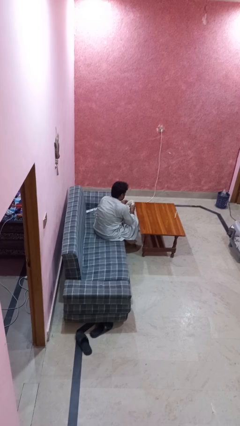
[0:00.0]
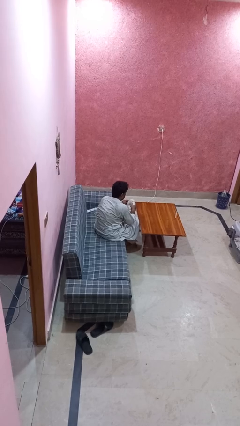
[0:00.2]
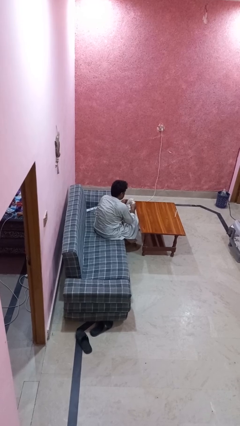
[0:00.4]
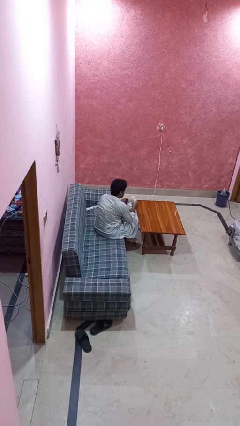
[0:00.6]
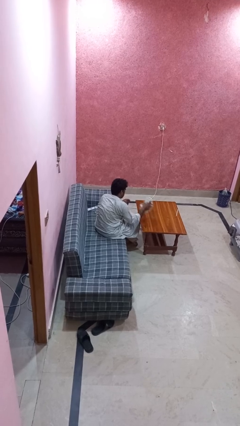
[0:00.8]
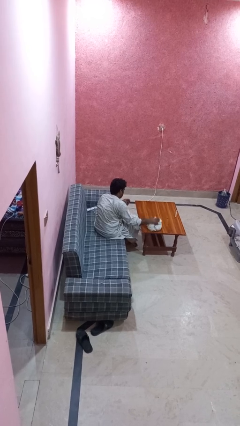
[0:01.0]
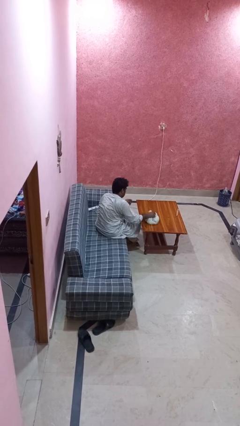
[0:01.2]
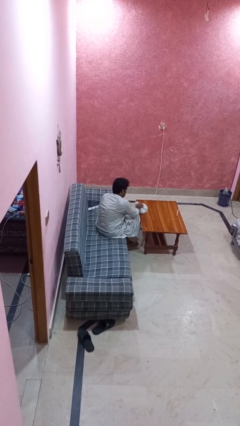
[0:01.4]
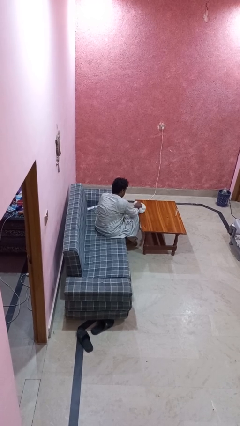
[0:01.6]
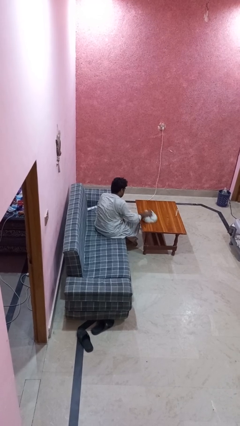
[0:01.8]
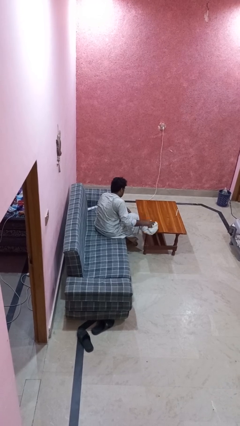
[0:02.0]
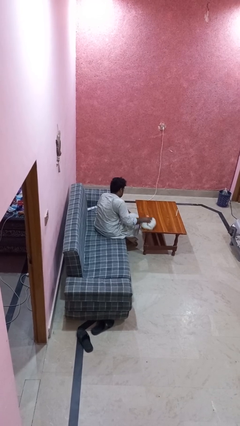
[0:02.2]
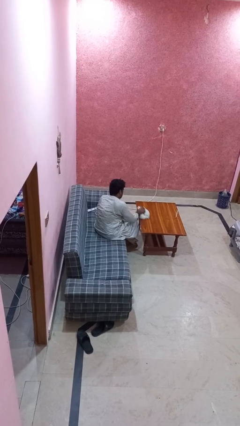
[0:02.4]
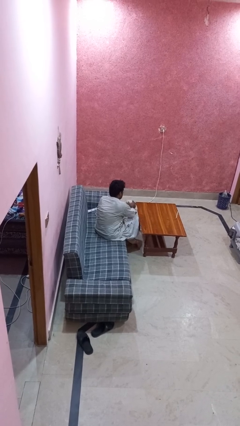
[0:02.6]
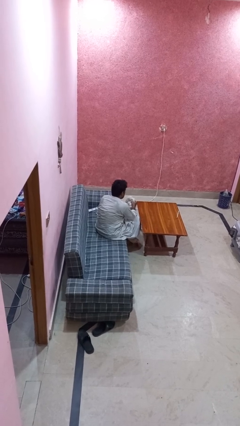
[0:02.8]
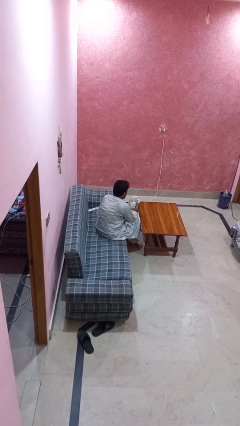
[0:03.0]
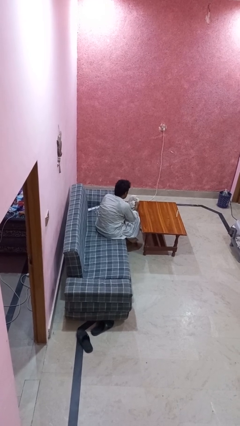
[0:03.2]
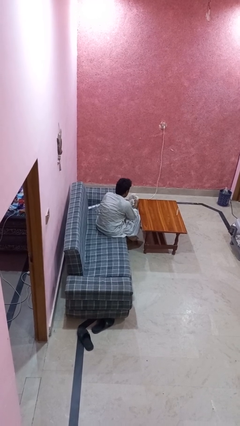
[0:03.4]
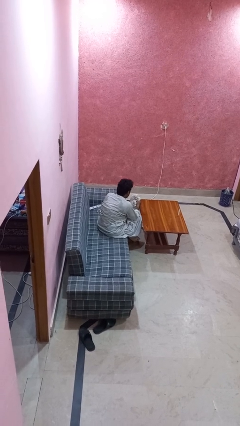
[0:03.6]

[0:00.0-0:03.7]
person cleans table with rag

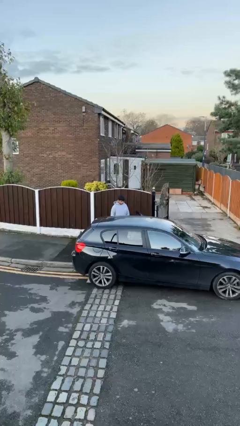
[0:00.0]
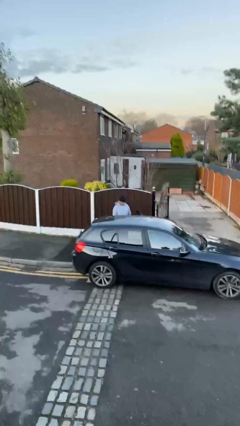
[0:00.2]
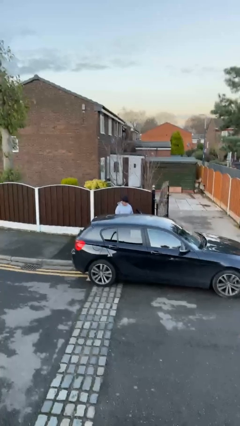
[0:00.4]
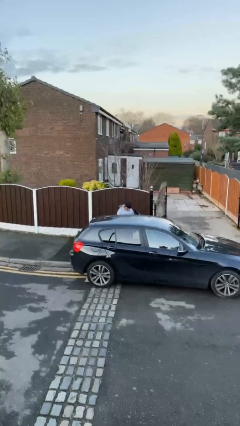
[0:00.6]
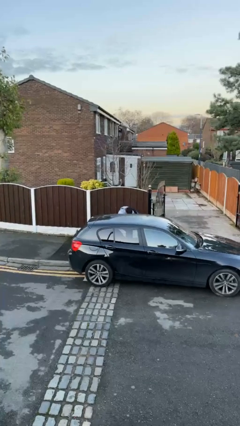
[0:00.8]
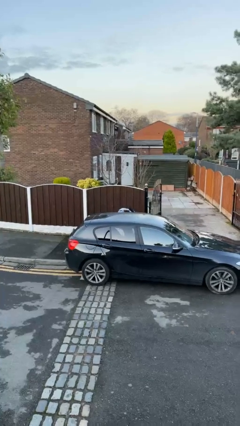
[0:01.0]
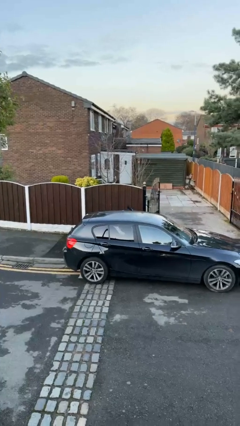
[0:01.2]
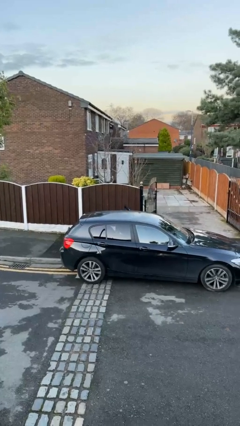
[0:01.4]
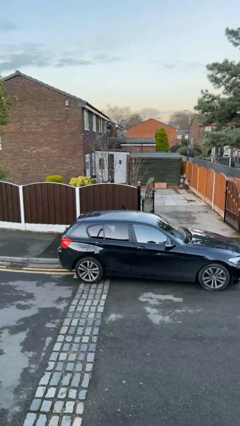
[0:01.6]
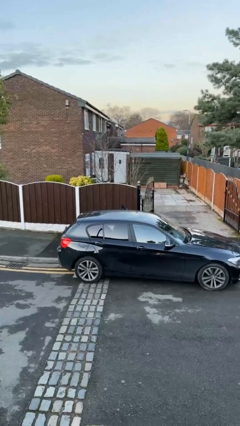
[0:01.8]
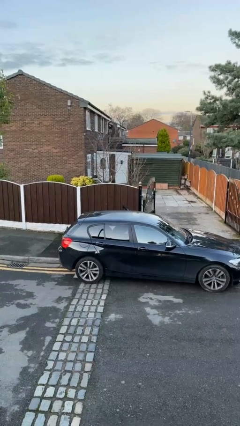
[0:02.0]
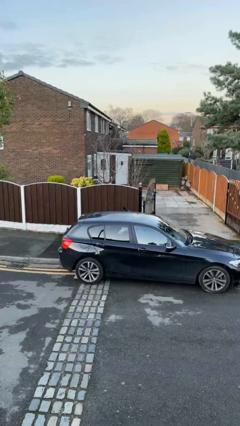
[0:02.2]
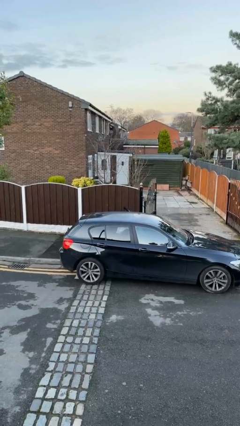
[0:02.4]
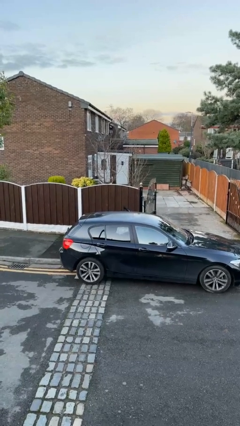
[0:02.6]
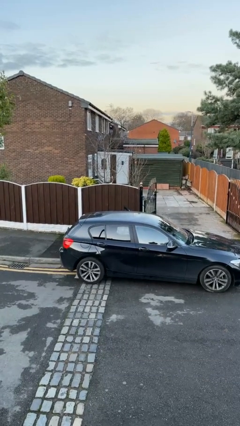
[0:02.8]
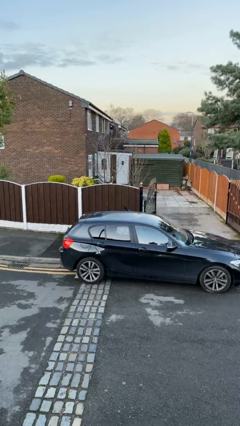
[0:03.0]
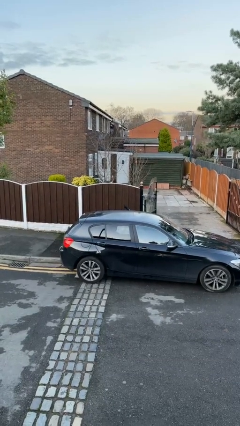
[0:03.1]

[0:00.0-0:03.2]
person enters car

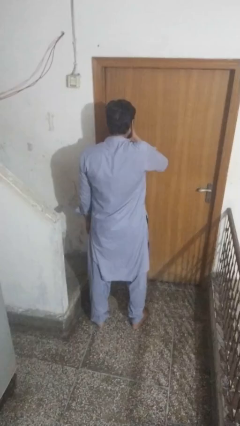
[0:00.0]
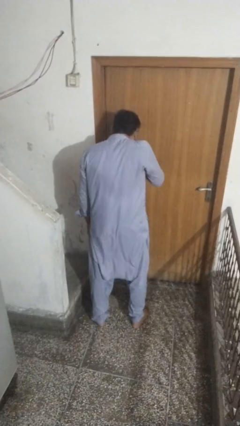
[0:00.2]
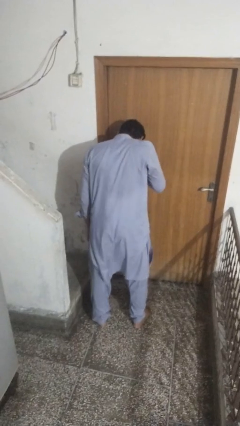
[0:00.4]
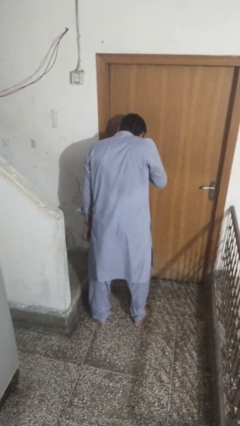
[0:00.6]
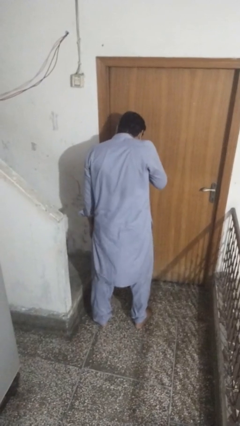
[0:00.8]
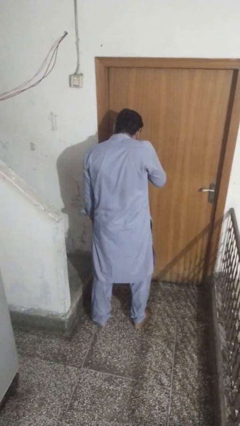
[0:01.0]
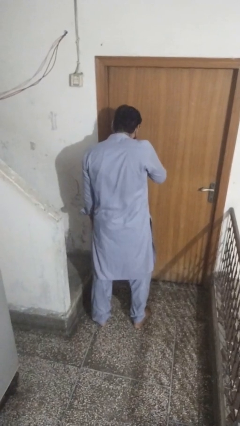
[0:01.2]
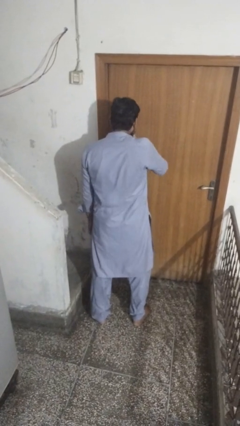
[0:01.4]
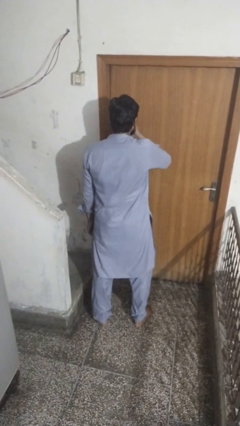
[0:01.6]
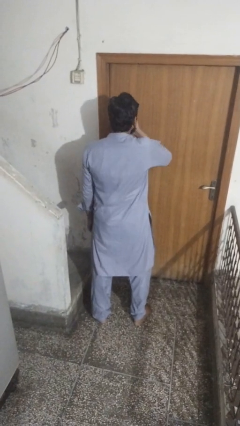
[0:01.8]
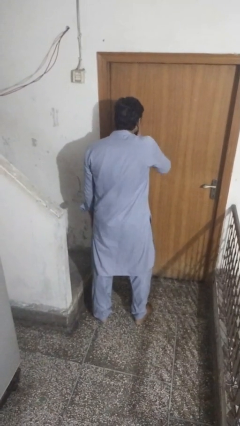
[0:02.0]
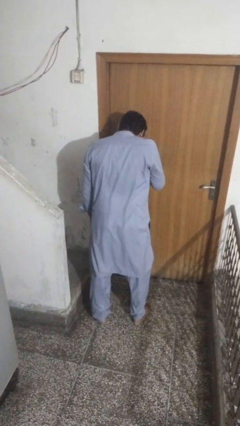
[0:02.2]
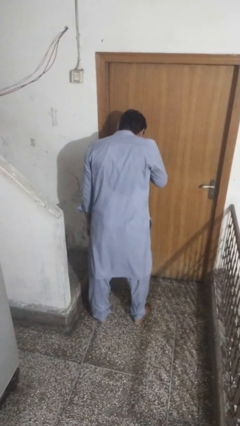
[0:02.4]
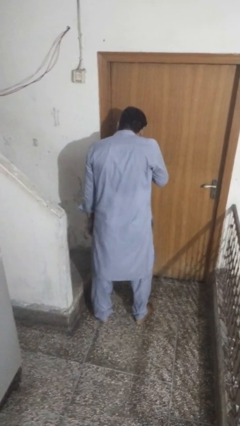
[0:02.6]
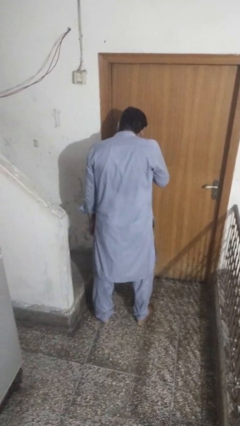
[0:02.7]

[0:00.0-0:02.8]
person sneezes into hand

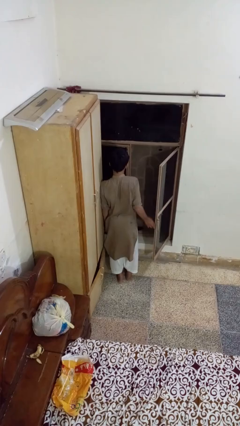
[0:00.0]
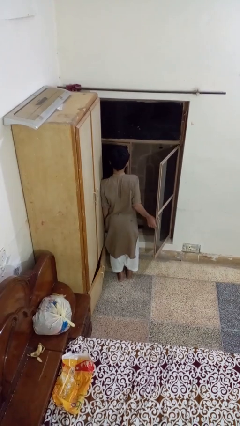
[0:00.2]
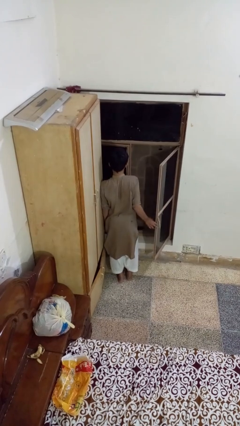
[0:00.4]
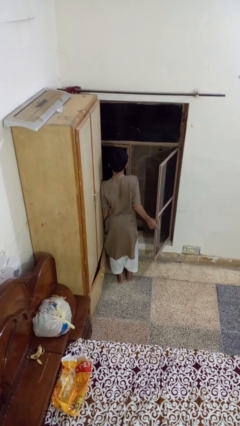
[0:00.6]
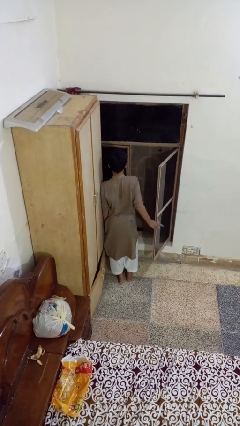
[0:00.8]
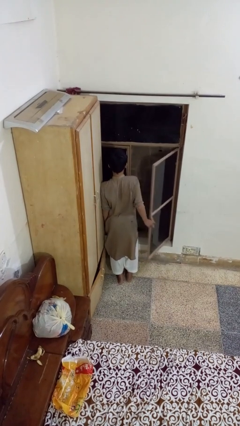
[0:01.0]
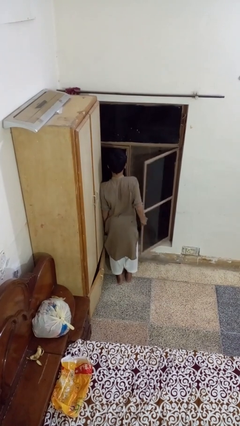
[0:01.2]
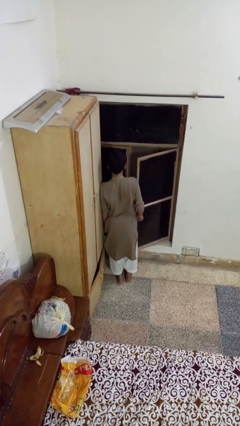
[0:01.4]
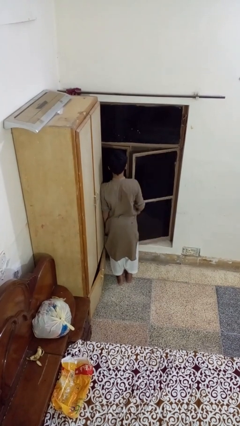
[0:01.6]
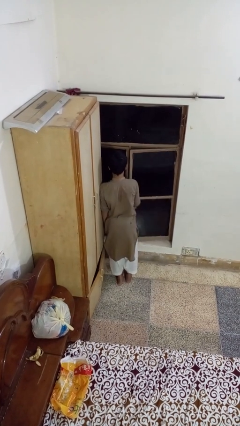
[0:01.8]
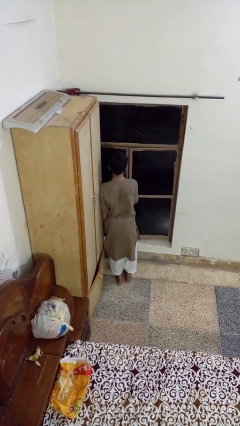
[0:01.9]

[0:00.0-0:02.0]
person closes home window

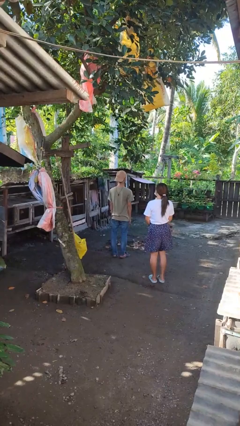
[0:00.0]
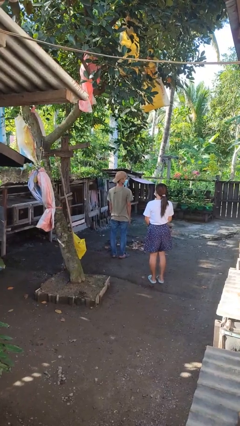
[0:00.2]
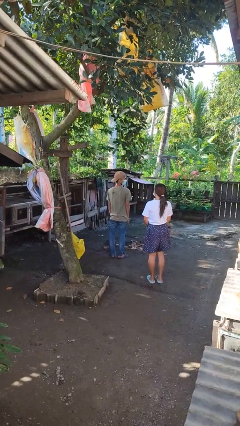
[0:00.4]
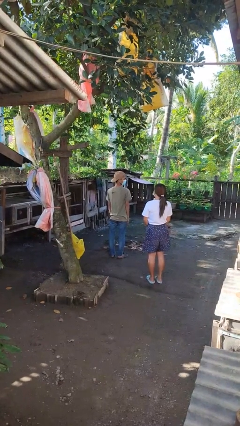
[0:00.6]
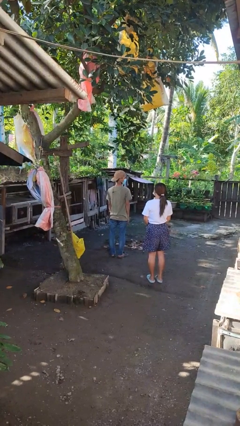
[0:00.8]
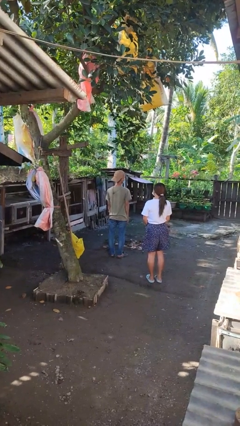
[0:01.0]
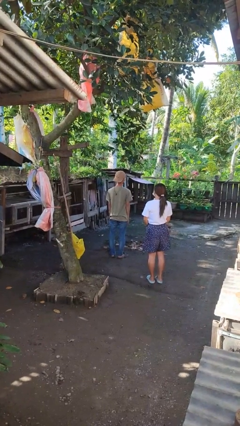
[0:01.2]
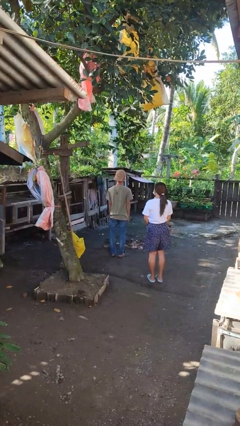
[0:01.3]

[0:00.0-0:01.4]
person looks over shoulder

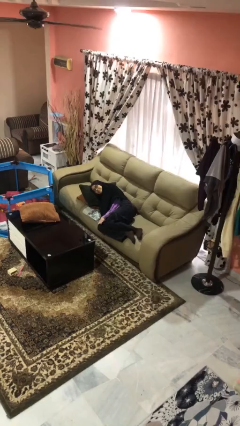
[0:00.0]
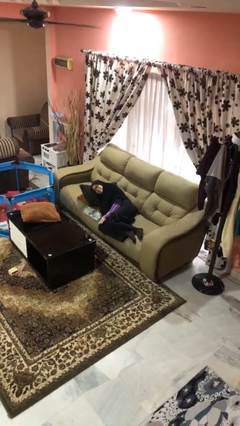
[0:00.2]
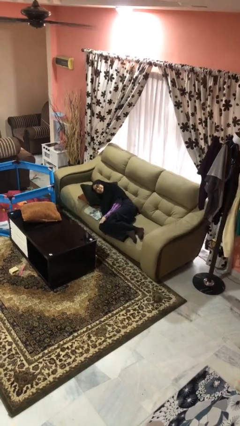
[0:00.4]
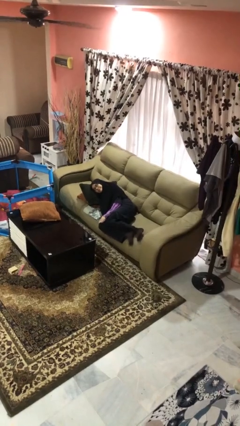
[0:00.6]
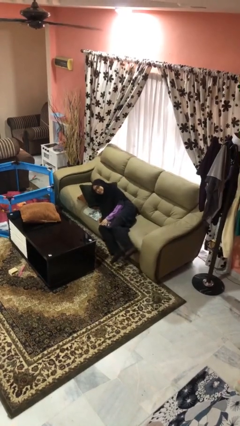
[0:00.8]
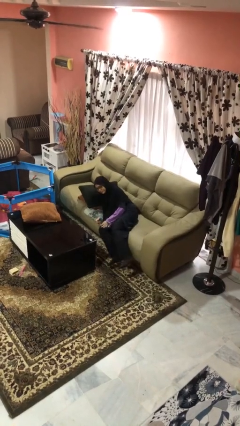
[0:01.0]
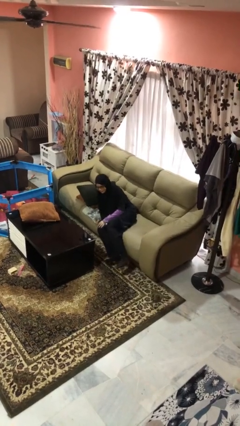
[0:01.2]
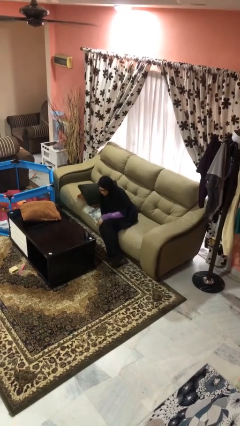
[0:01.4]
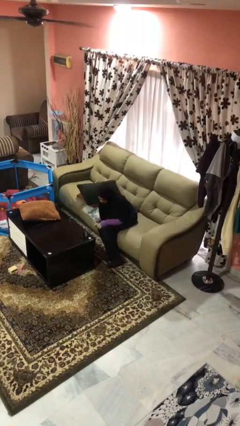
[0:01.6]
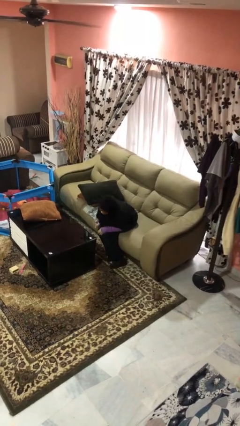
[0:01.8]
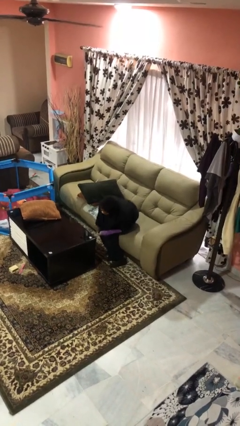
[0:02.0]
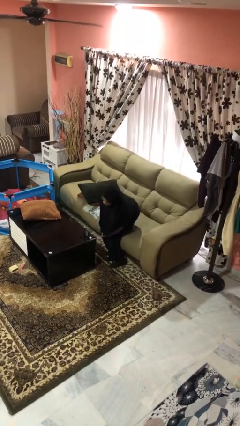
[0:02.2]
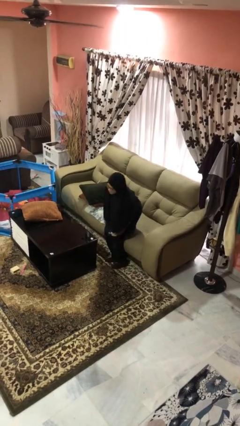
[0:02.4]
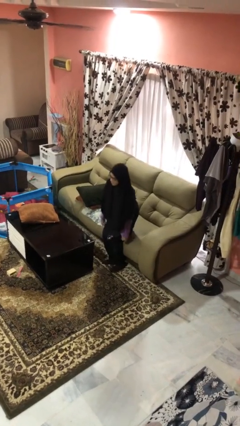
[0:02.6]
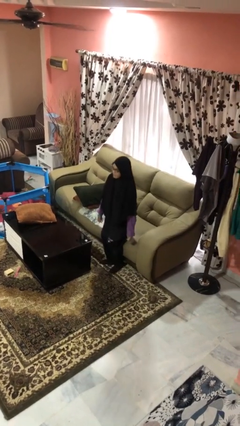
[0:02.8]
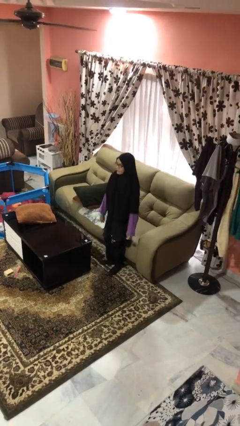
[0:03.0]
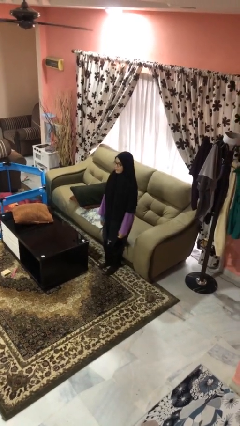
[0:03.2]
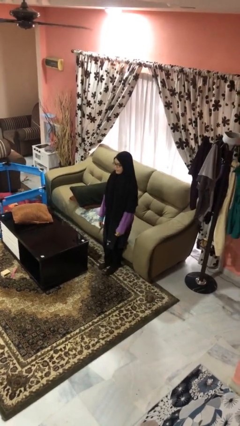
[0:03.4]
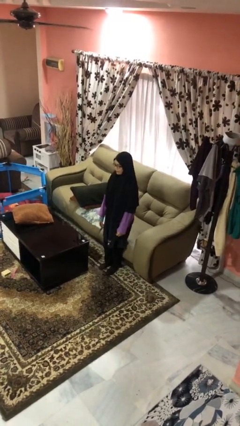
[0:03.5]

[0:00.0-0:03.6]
person stands up

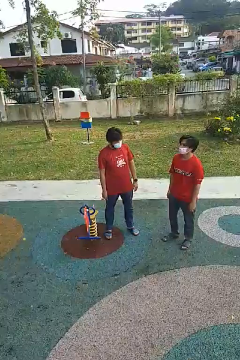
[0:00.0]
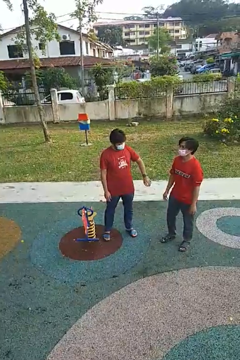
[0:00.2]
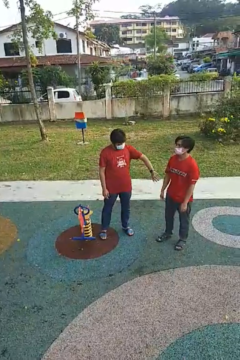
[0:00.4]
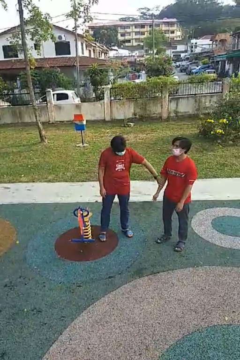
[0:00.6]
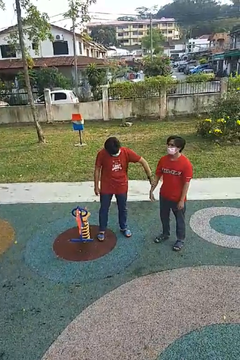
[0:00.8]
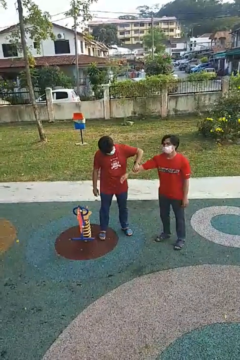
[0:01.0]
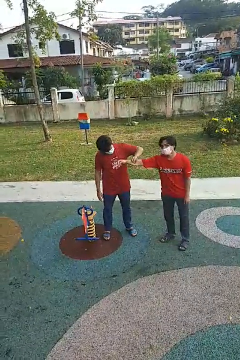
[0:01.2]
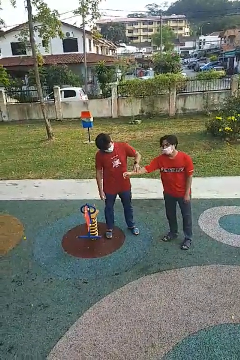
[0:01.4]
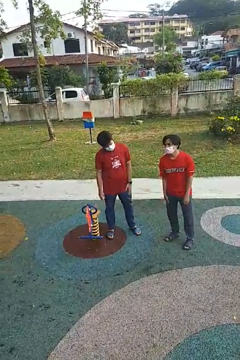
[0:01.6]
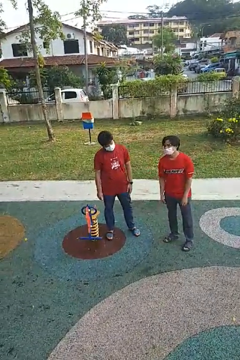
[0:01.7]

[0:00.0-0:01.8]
person grabs person by forearm
